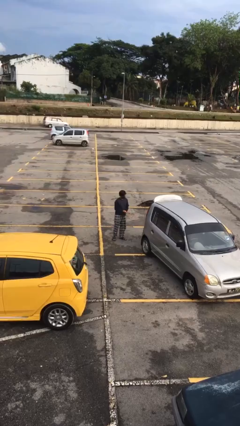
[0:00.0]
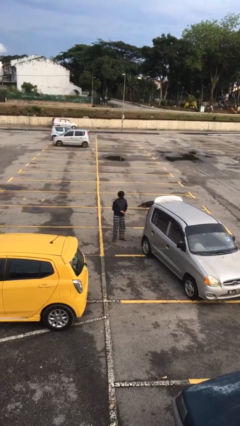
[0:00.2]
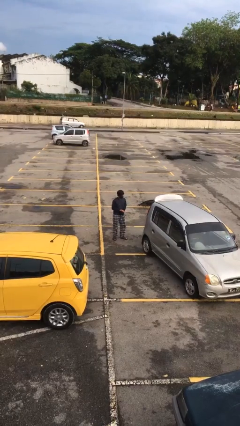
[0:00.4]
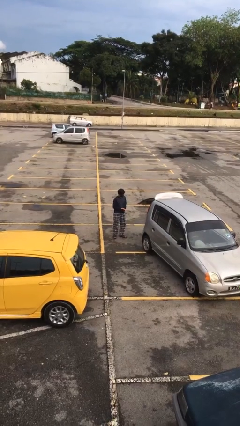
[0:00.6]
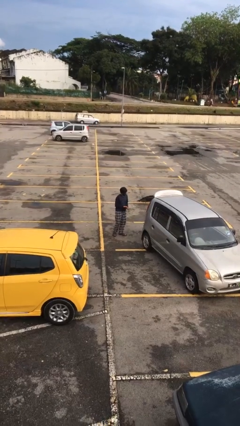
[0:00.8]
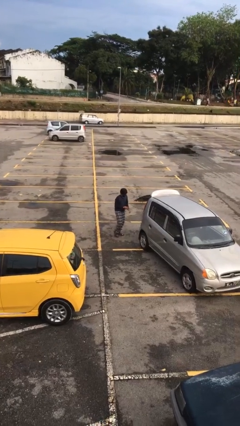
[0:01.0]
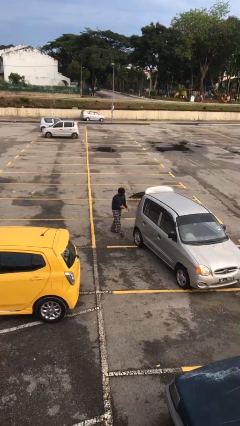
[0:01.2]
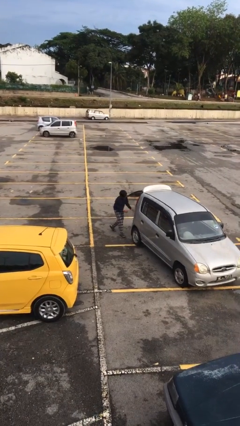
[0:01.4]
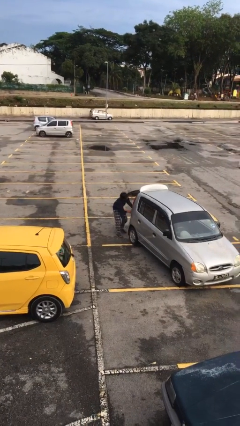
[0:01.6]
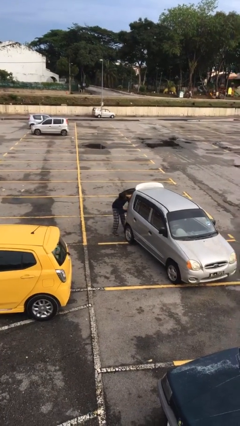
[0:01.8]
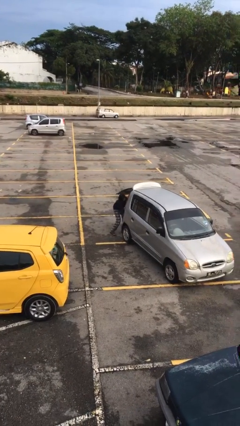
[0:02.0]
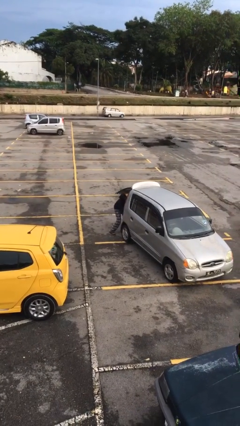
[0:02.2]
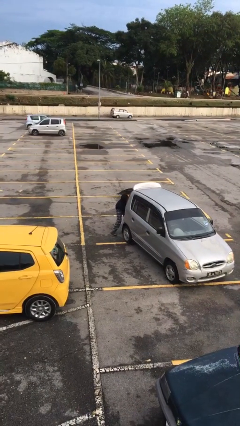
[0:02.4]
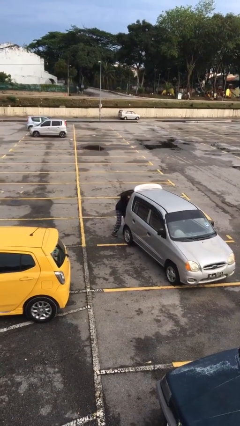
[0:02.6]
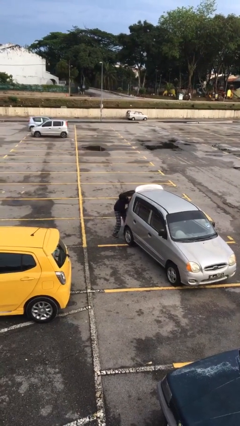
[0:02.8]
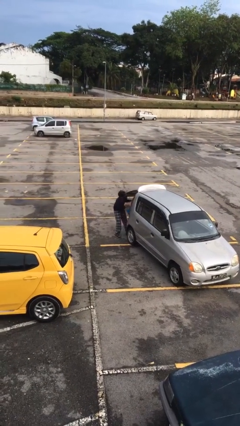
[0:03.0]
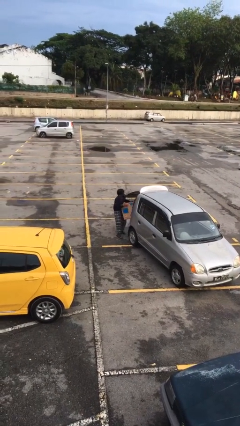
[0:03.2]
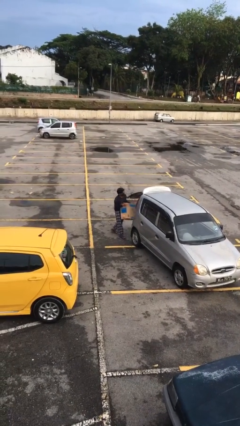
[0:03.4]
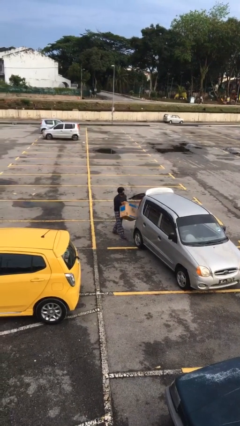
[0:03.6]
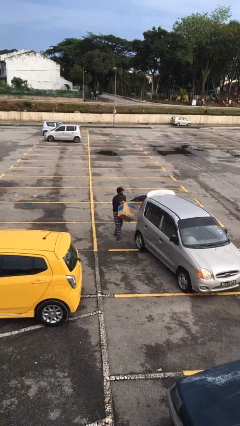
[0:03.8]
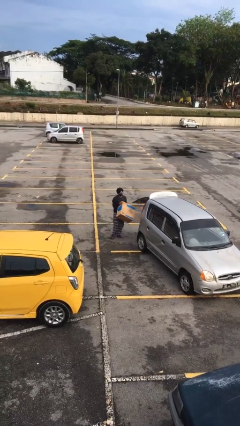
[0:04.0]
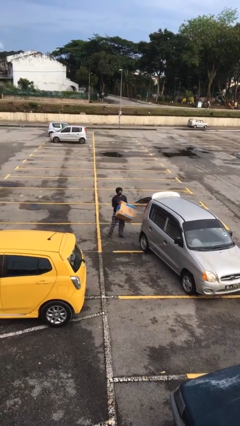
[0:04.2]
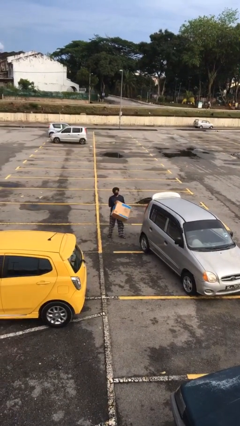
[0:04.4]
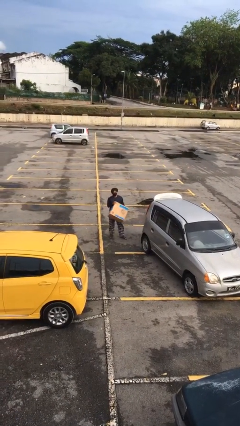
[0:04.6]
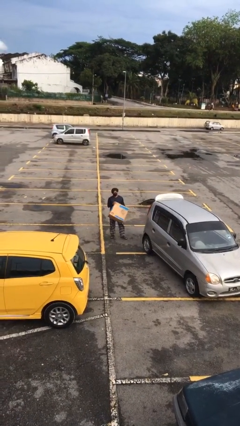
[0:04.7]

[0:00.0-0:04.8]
person unloads car

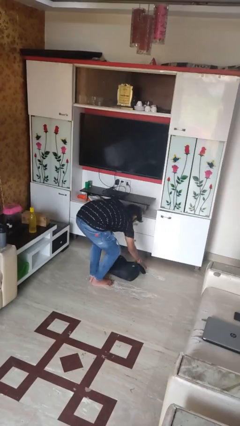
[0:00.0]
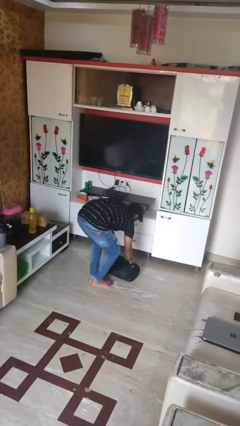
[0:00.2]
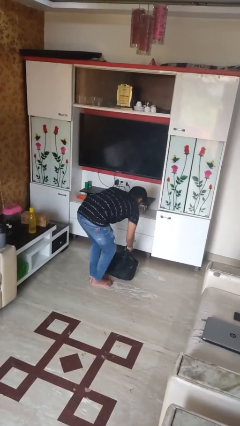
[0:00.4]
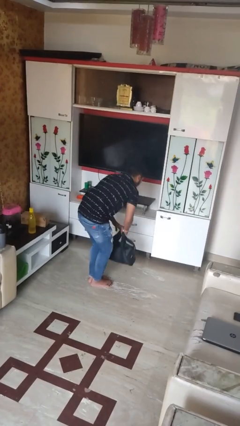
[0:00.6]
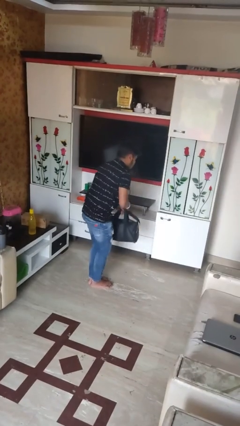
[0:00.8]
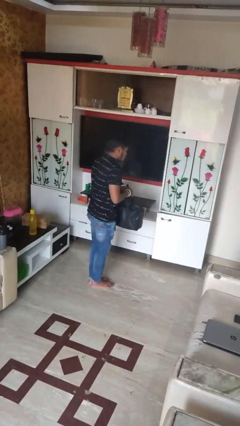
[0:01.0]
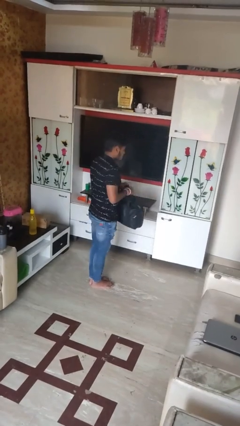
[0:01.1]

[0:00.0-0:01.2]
person picks up object from floor

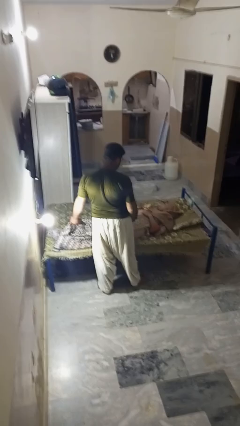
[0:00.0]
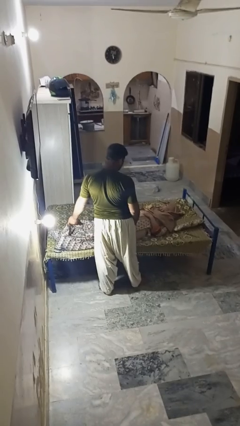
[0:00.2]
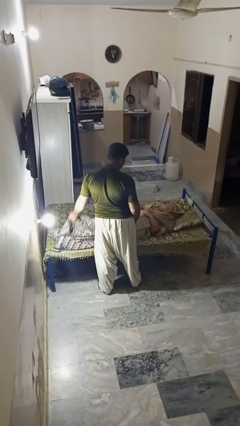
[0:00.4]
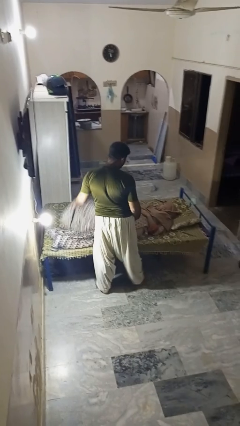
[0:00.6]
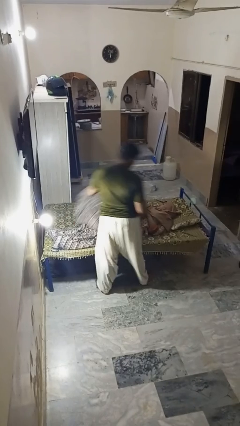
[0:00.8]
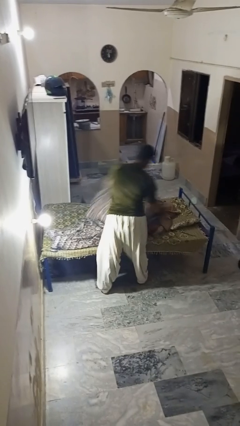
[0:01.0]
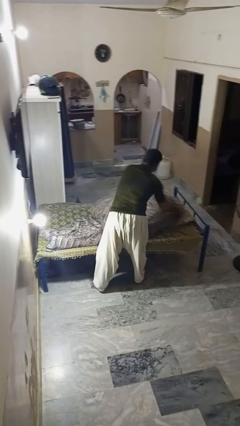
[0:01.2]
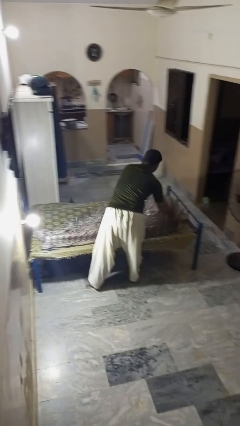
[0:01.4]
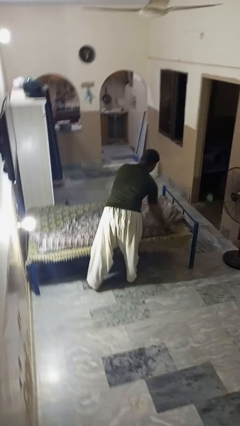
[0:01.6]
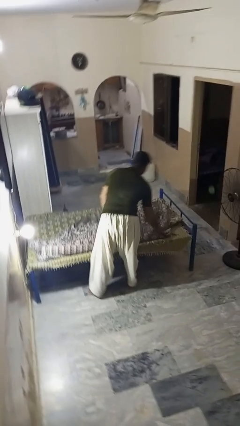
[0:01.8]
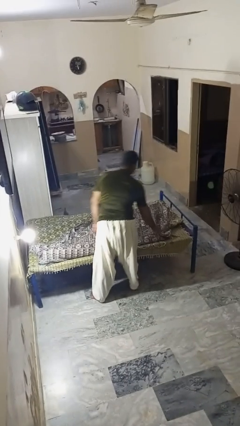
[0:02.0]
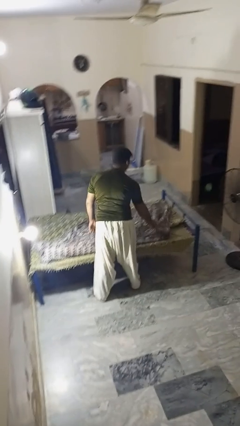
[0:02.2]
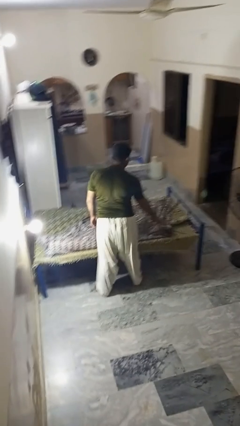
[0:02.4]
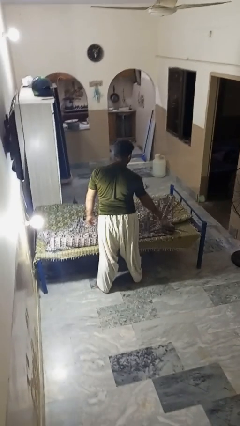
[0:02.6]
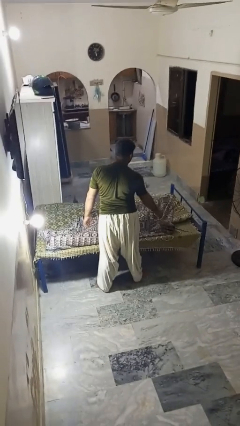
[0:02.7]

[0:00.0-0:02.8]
person covers friend with blanket

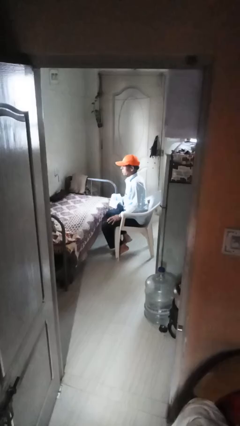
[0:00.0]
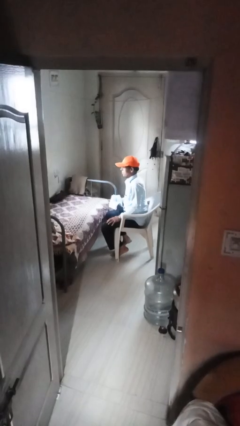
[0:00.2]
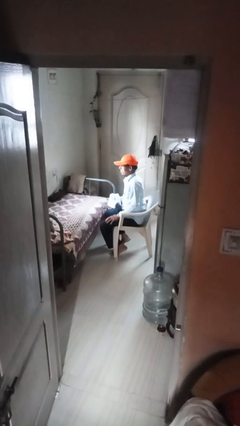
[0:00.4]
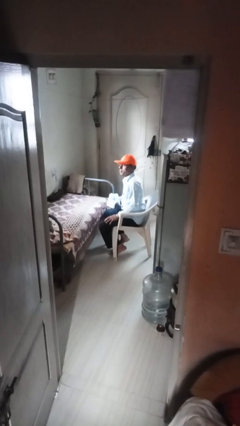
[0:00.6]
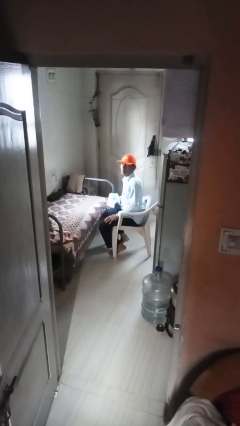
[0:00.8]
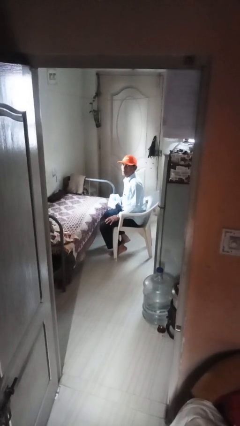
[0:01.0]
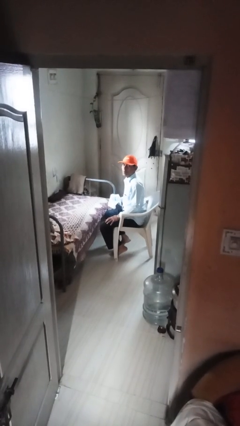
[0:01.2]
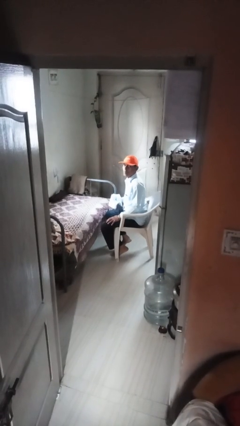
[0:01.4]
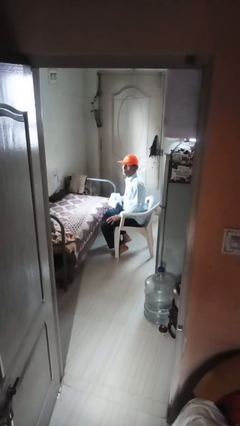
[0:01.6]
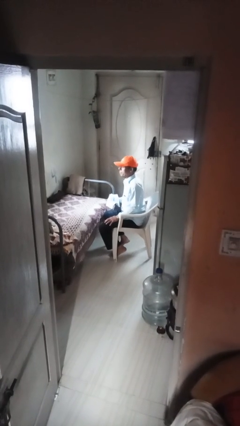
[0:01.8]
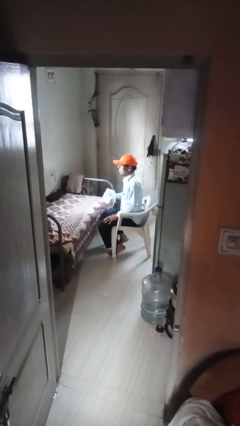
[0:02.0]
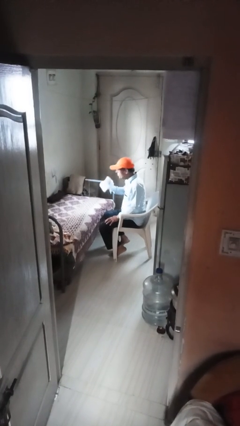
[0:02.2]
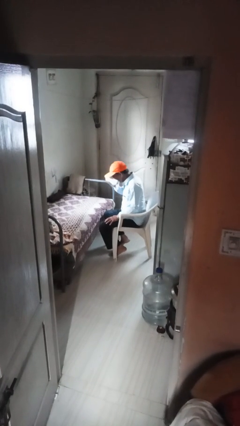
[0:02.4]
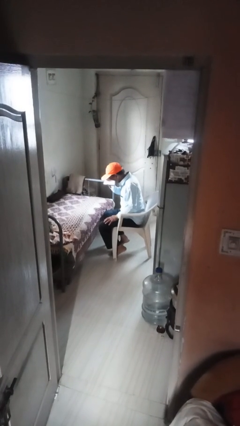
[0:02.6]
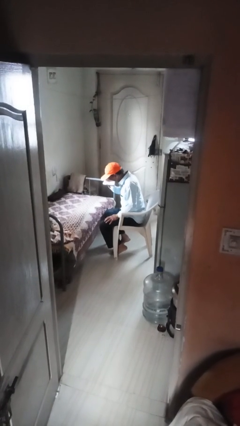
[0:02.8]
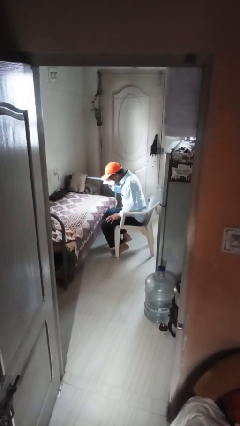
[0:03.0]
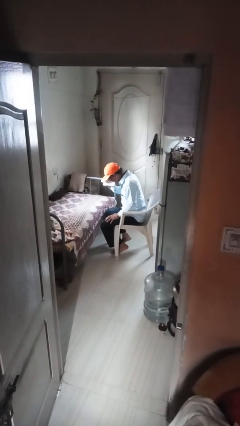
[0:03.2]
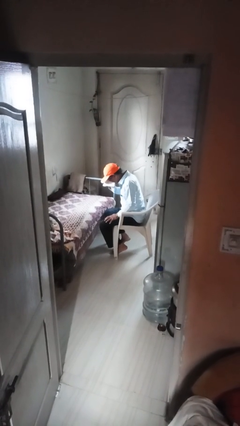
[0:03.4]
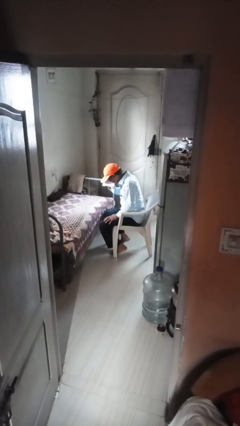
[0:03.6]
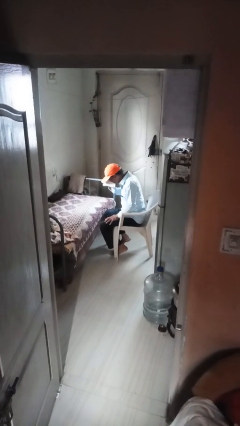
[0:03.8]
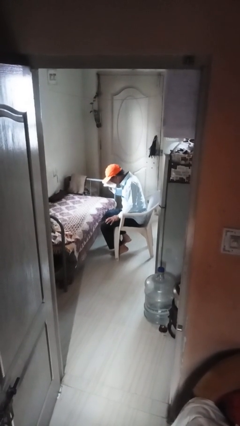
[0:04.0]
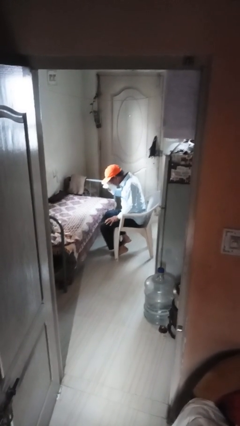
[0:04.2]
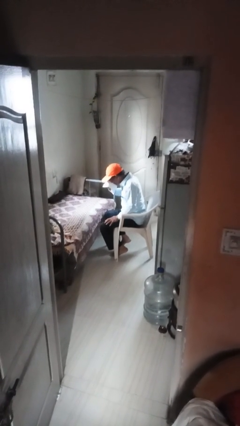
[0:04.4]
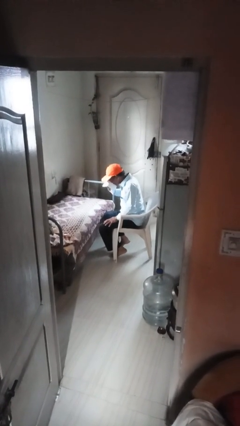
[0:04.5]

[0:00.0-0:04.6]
person blows nose

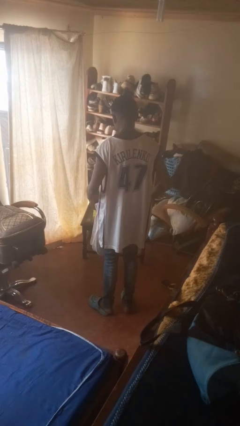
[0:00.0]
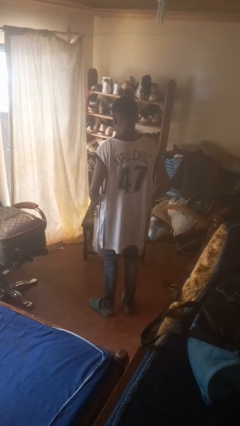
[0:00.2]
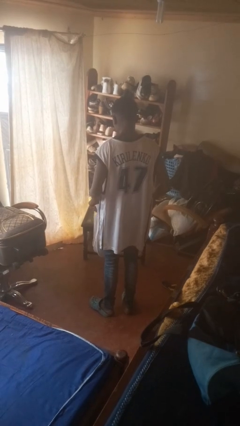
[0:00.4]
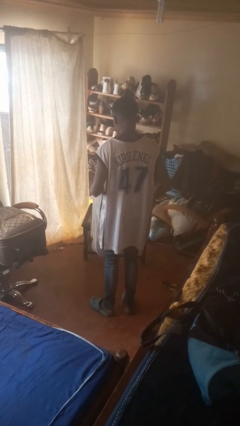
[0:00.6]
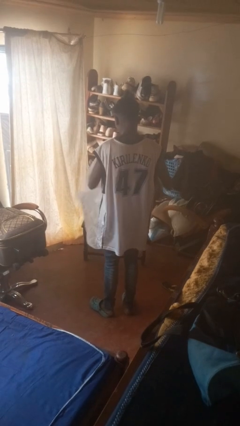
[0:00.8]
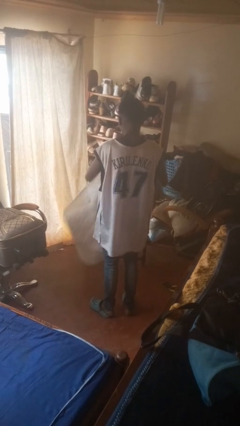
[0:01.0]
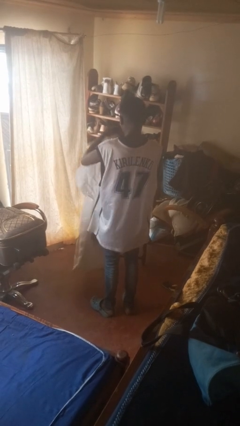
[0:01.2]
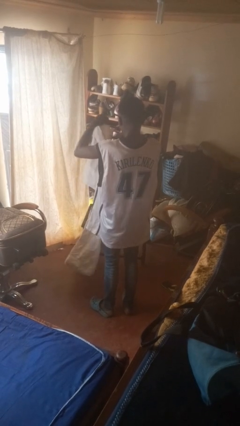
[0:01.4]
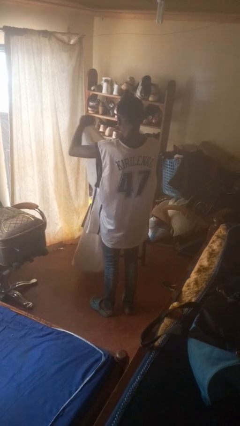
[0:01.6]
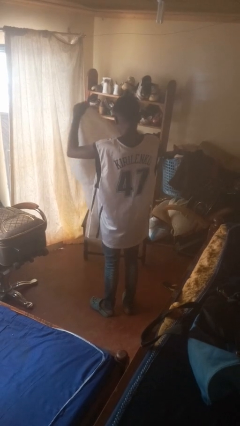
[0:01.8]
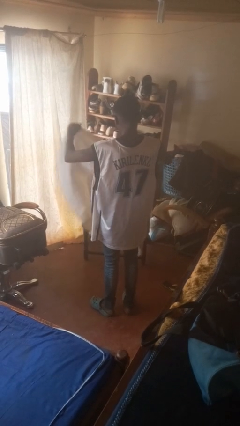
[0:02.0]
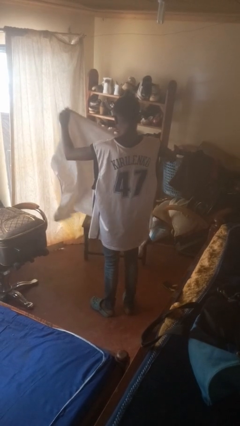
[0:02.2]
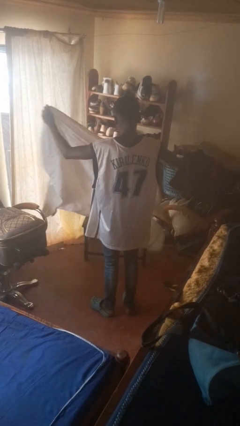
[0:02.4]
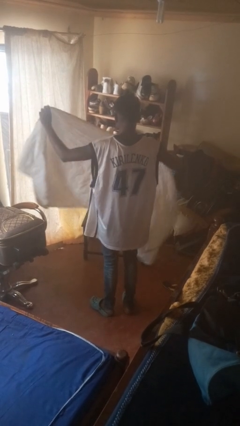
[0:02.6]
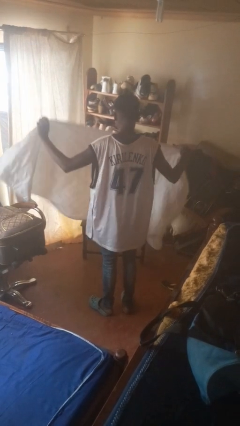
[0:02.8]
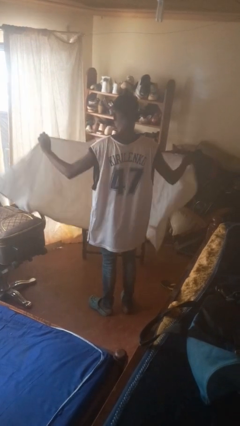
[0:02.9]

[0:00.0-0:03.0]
person unfolds blanket

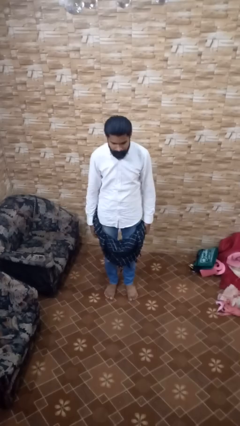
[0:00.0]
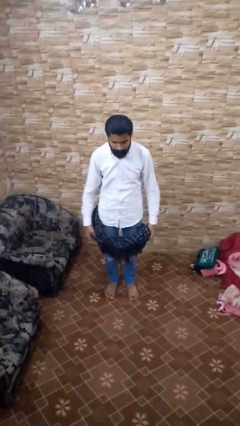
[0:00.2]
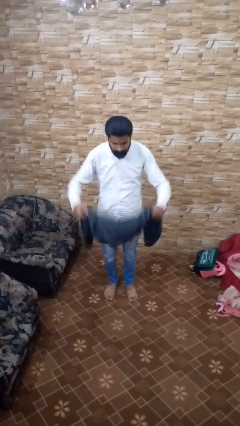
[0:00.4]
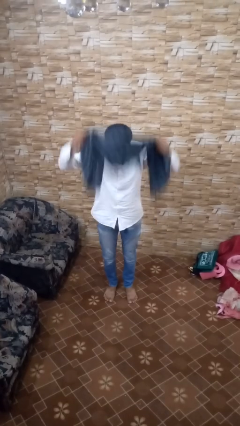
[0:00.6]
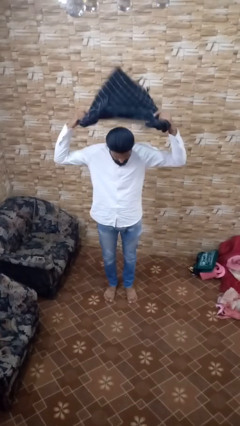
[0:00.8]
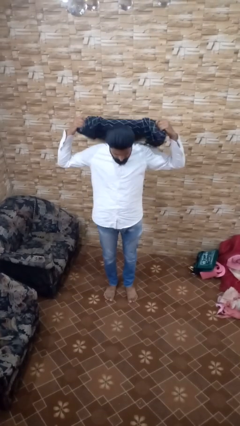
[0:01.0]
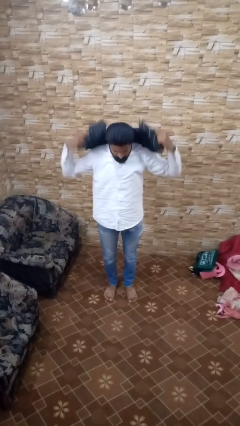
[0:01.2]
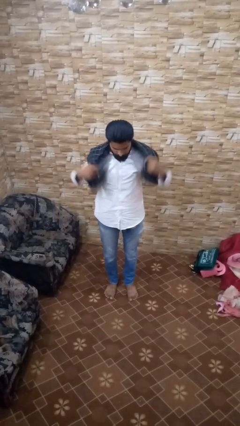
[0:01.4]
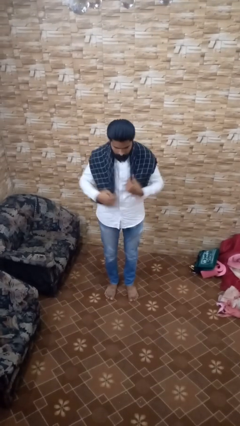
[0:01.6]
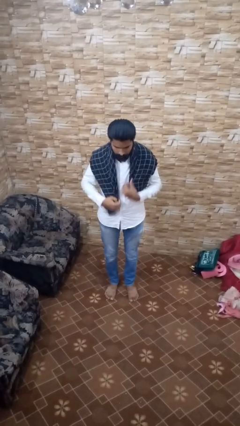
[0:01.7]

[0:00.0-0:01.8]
person puts on scarf
